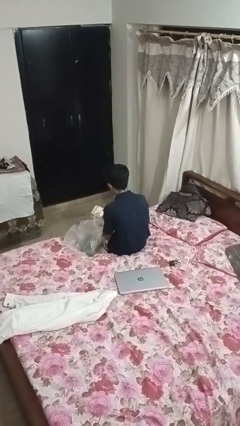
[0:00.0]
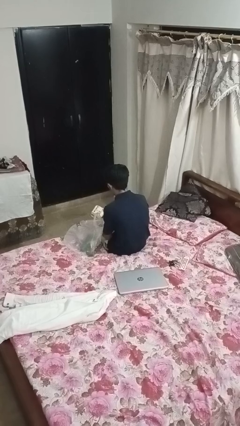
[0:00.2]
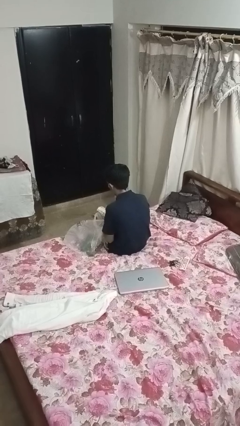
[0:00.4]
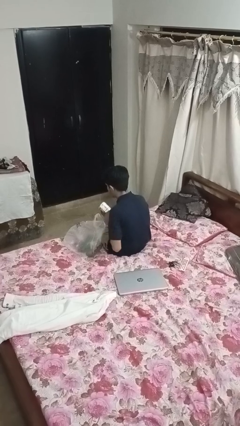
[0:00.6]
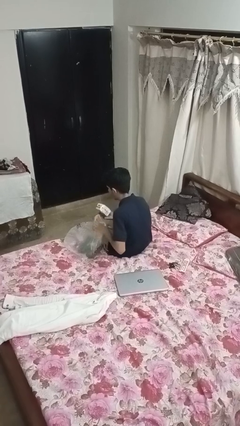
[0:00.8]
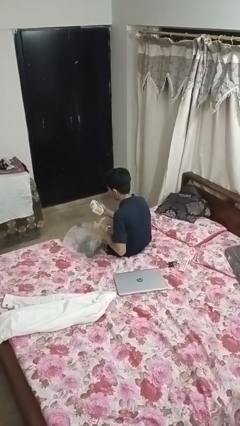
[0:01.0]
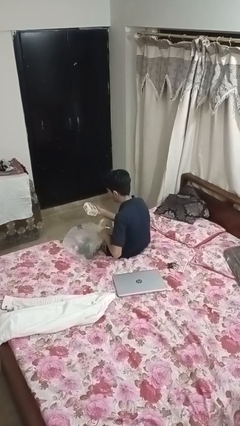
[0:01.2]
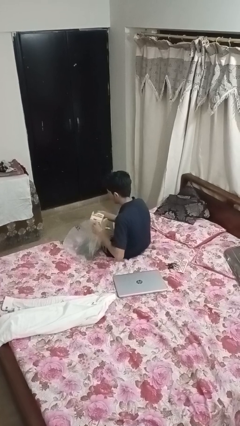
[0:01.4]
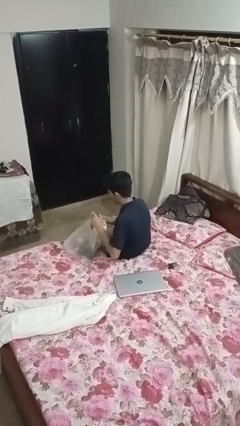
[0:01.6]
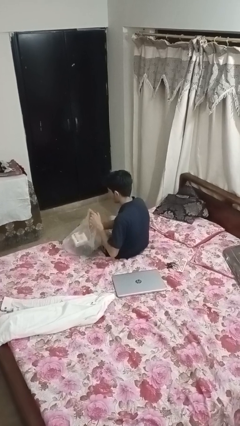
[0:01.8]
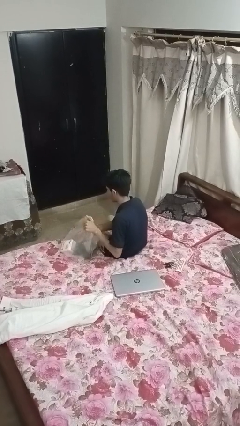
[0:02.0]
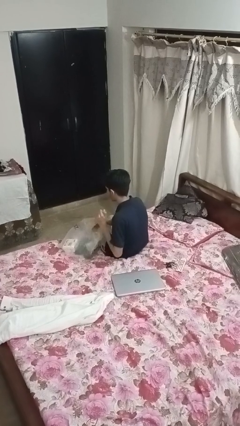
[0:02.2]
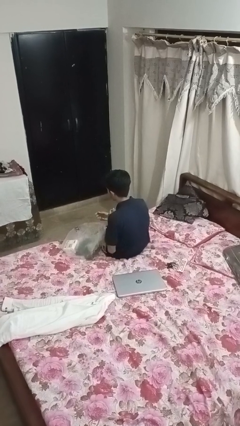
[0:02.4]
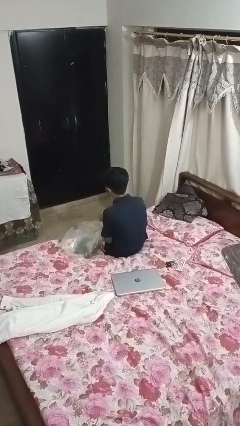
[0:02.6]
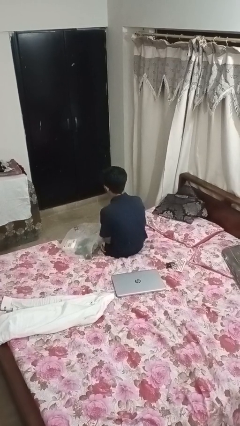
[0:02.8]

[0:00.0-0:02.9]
person puts object into bag

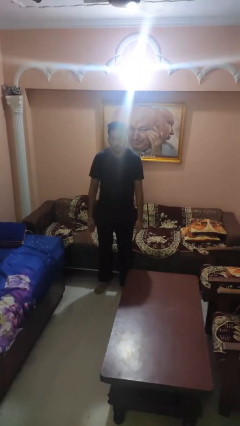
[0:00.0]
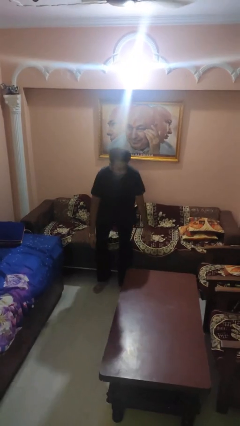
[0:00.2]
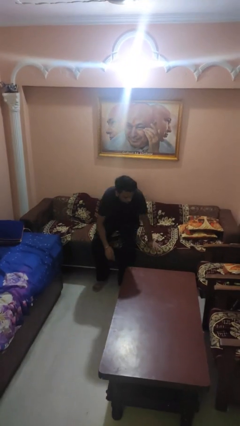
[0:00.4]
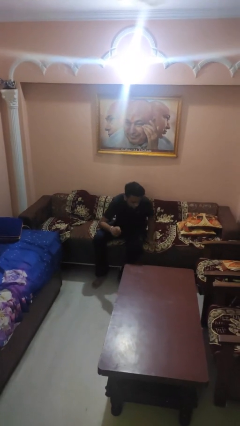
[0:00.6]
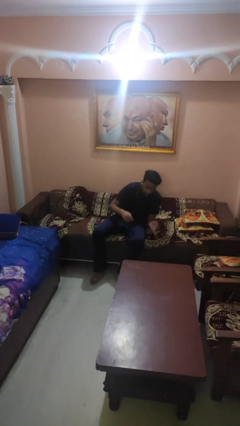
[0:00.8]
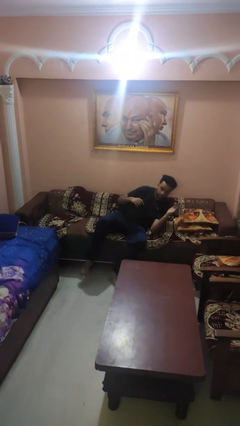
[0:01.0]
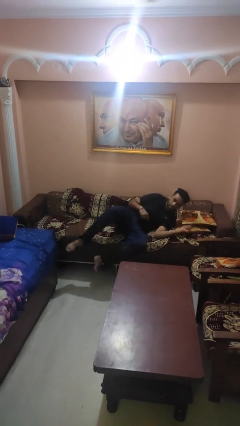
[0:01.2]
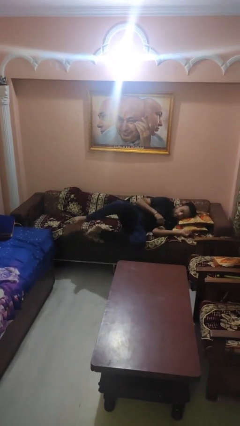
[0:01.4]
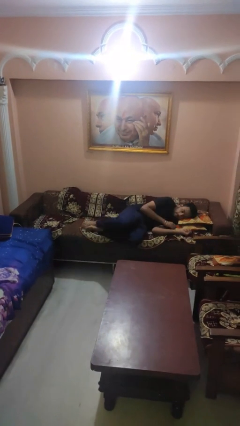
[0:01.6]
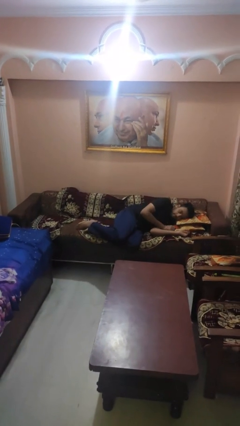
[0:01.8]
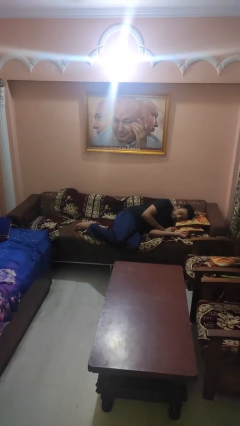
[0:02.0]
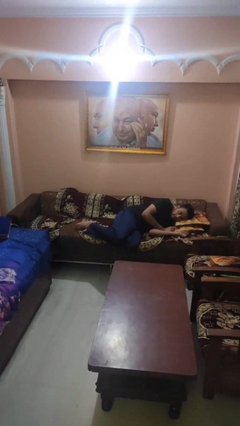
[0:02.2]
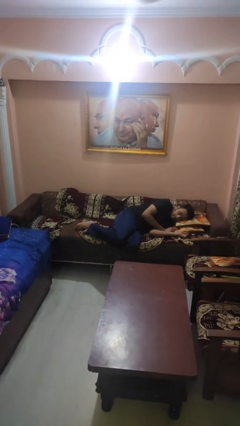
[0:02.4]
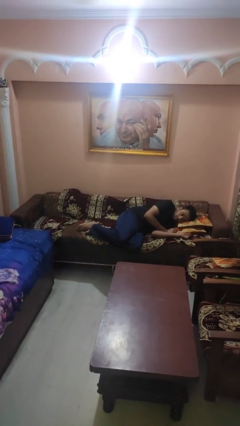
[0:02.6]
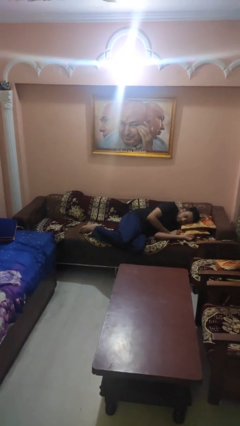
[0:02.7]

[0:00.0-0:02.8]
person lies down on couch

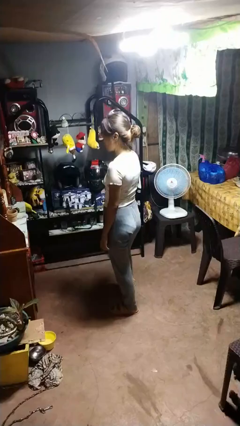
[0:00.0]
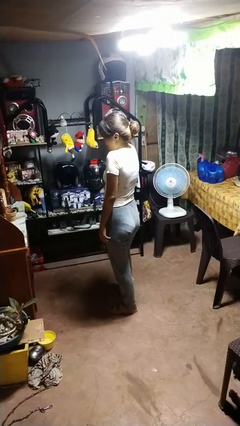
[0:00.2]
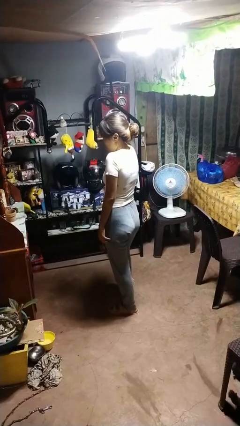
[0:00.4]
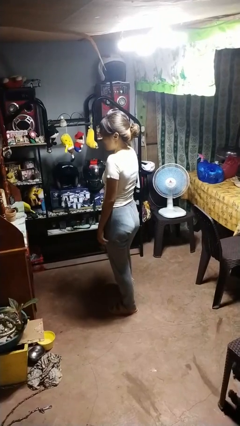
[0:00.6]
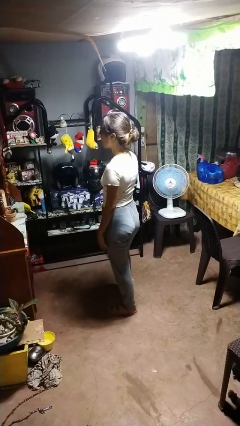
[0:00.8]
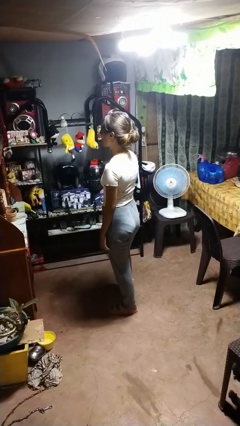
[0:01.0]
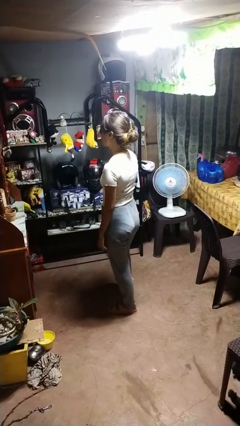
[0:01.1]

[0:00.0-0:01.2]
person shrugs

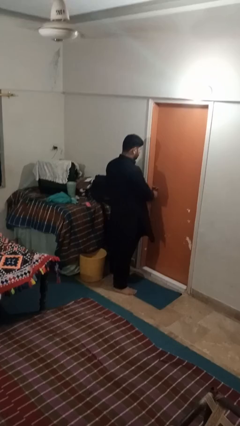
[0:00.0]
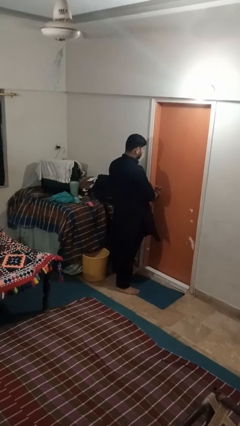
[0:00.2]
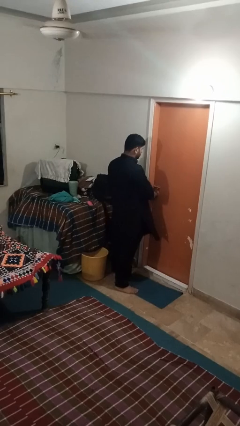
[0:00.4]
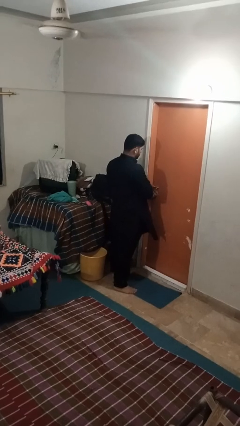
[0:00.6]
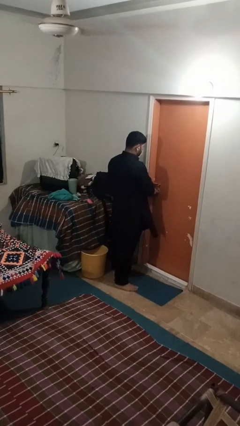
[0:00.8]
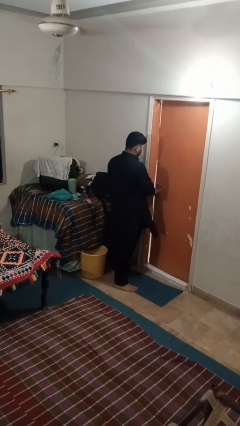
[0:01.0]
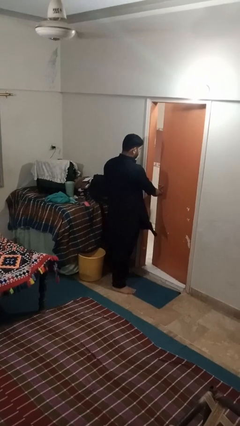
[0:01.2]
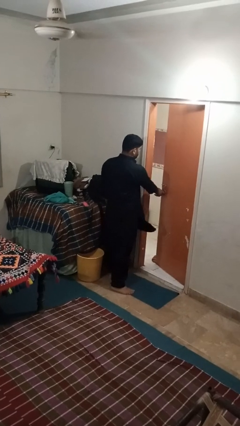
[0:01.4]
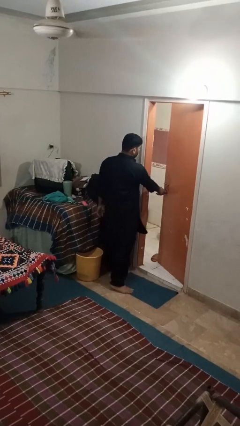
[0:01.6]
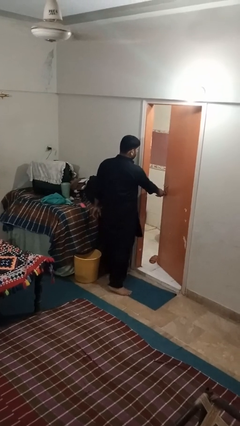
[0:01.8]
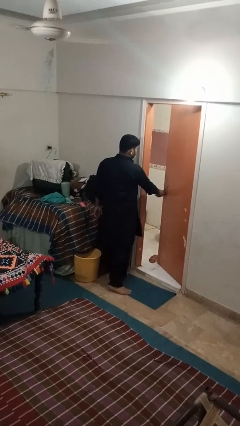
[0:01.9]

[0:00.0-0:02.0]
person opens facility door

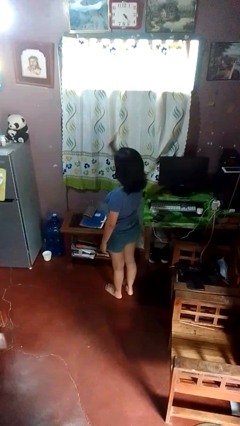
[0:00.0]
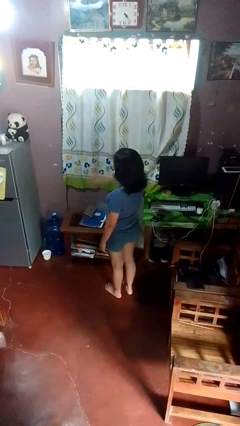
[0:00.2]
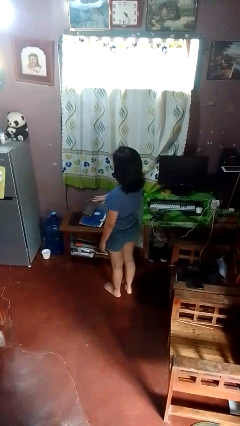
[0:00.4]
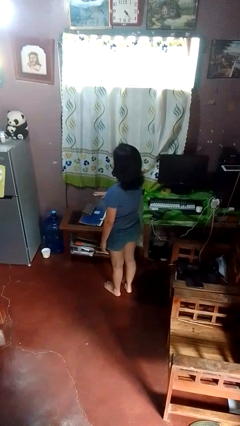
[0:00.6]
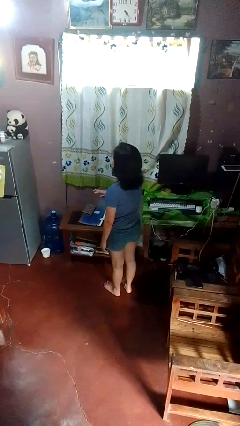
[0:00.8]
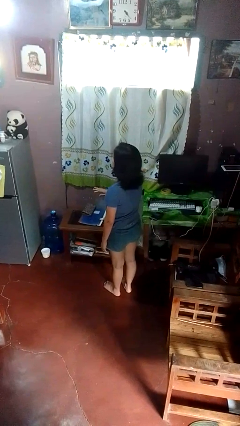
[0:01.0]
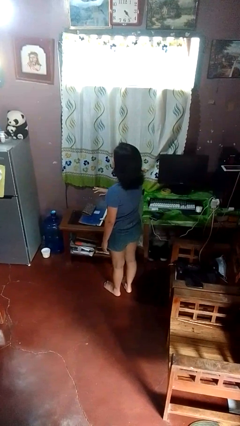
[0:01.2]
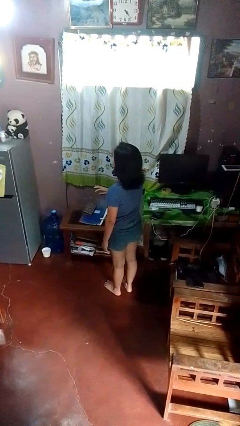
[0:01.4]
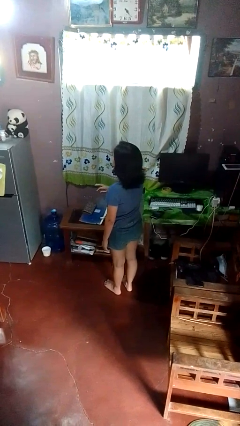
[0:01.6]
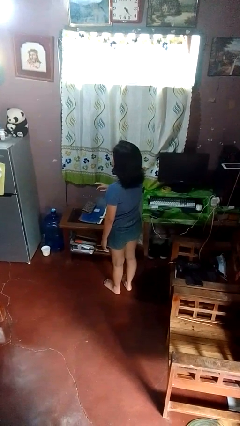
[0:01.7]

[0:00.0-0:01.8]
person gestures swipe down

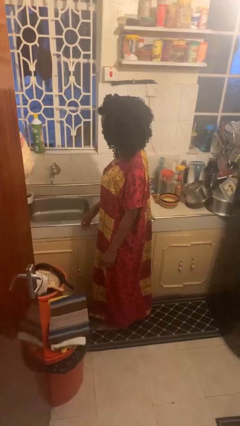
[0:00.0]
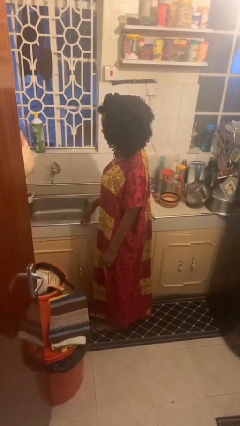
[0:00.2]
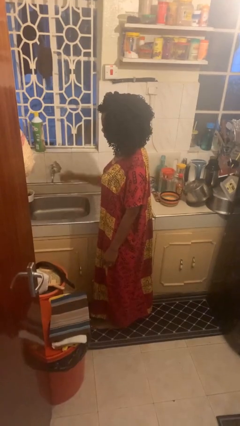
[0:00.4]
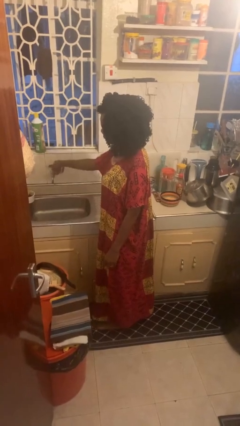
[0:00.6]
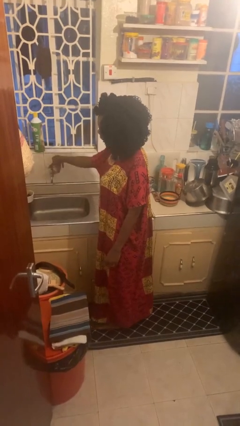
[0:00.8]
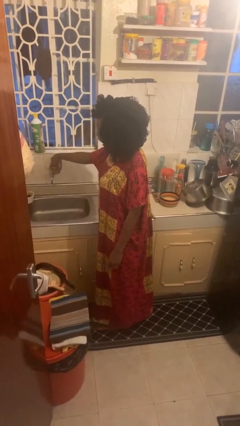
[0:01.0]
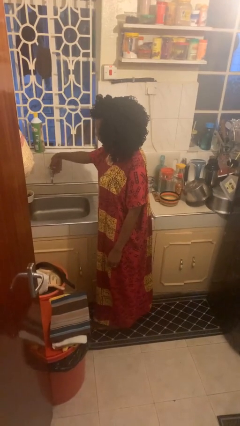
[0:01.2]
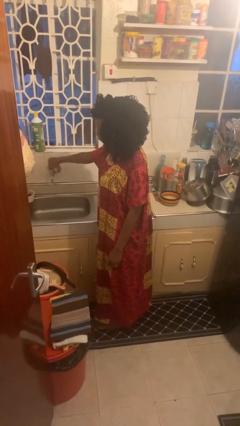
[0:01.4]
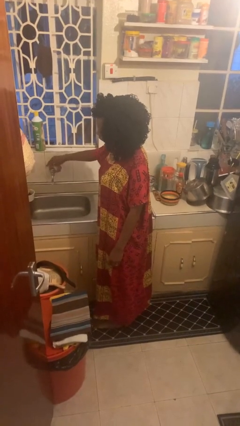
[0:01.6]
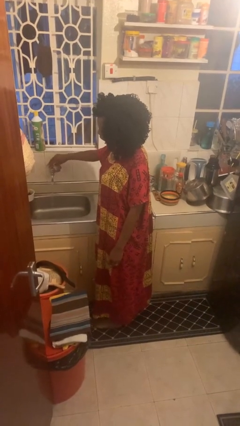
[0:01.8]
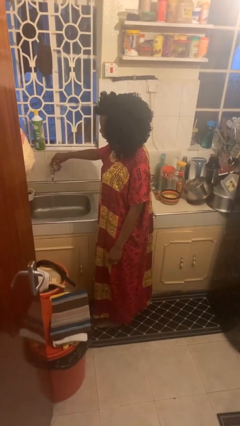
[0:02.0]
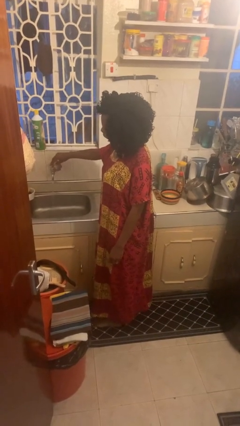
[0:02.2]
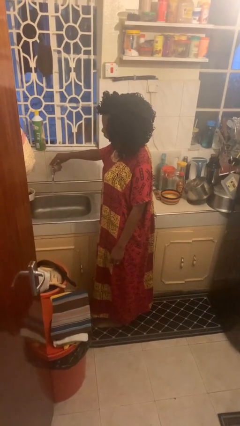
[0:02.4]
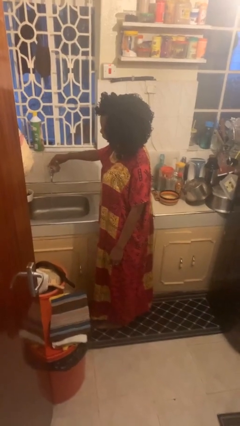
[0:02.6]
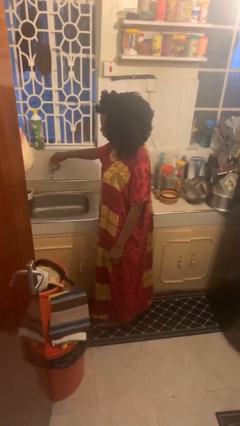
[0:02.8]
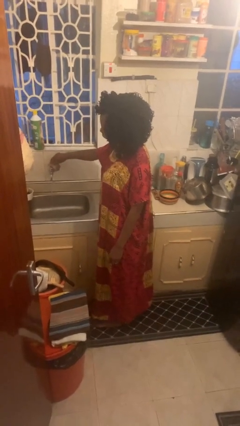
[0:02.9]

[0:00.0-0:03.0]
person turns on faucet

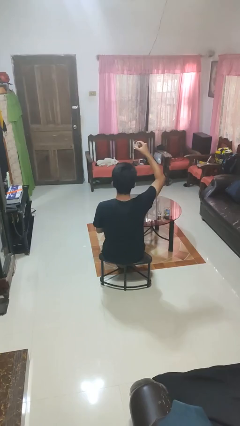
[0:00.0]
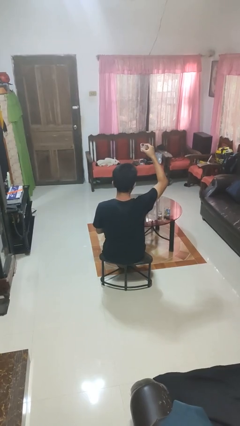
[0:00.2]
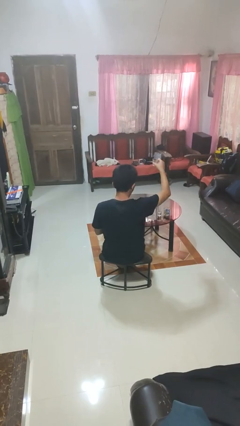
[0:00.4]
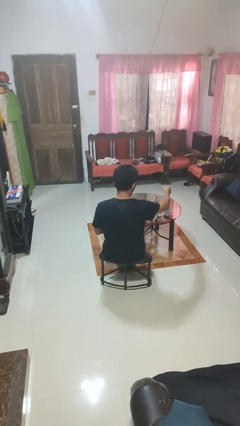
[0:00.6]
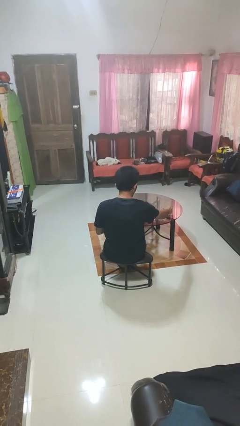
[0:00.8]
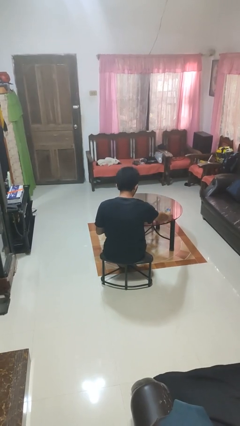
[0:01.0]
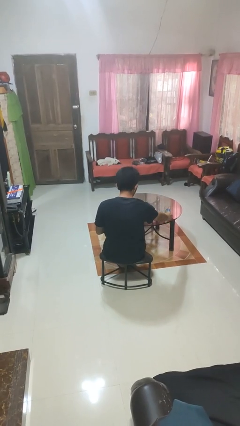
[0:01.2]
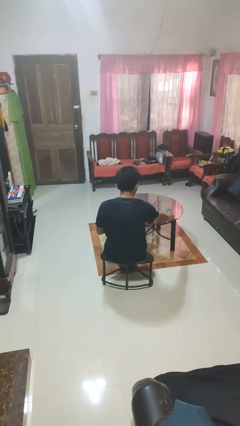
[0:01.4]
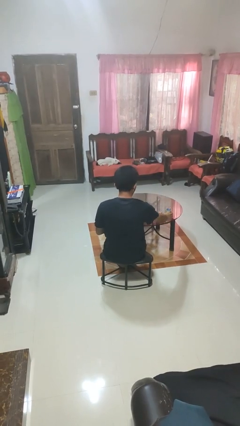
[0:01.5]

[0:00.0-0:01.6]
person puts down object on table

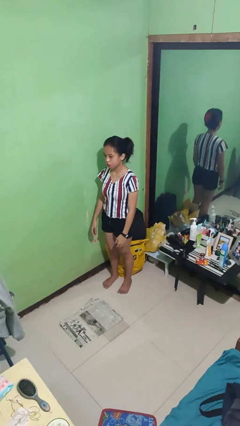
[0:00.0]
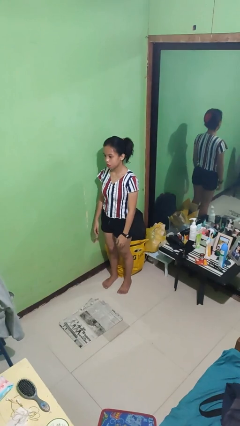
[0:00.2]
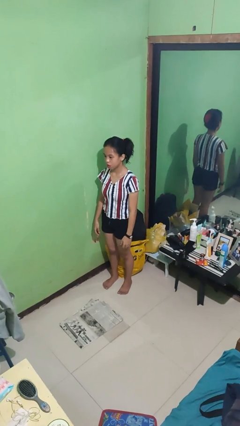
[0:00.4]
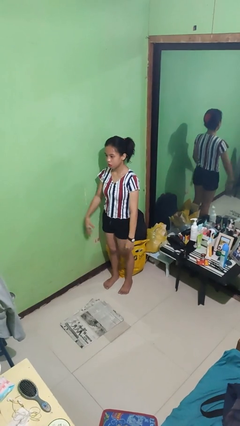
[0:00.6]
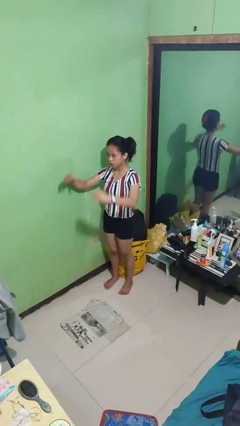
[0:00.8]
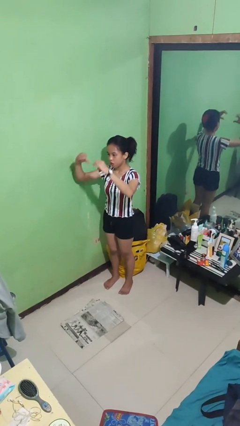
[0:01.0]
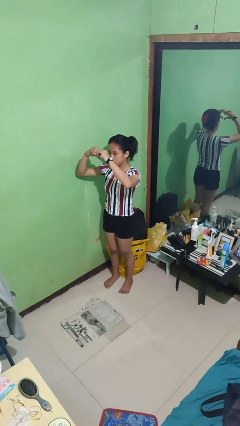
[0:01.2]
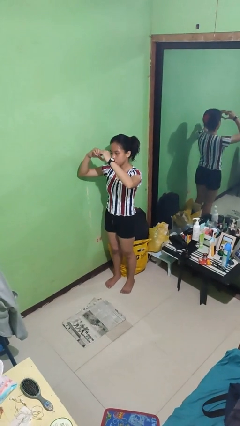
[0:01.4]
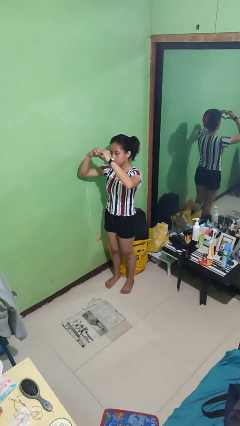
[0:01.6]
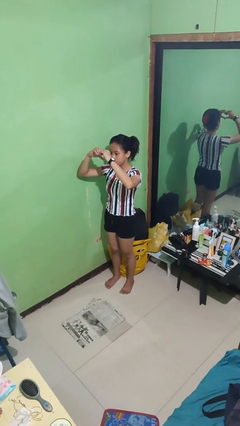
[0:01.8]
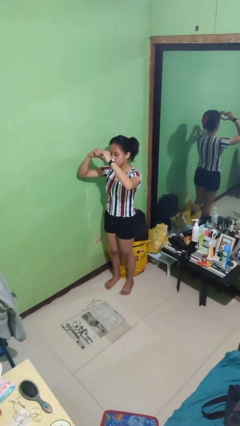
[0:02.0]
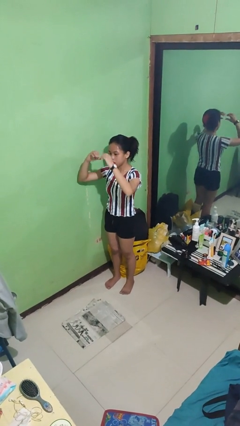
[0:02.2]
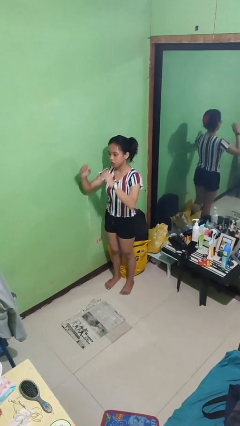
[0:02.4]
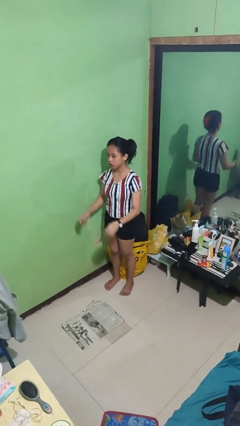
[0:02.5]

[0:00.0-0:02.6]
person gestures heart
